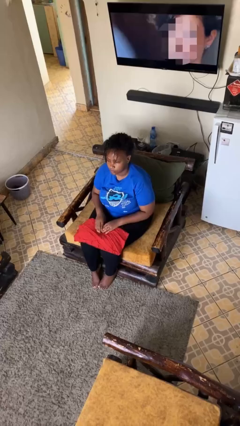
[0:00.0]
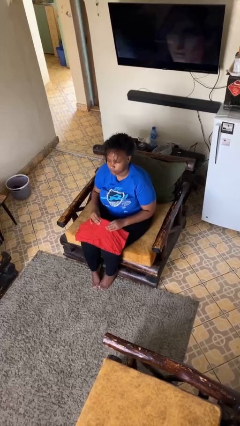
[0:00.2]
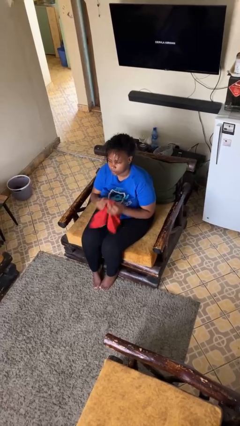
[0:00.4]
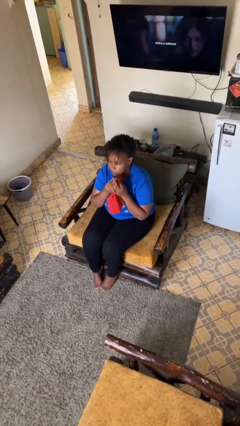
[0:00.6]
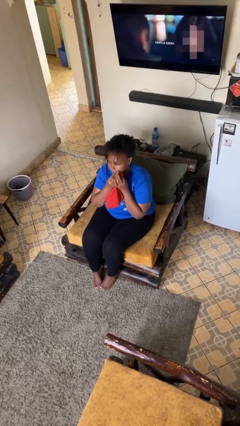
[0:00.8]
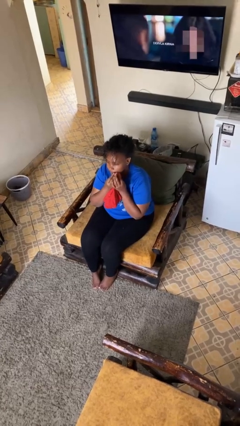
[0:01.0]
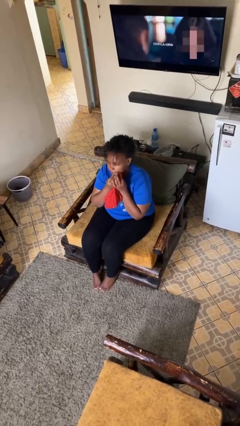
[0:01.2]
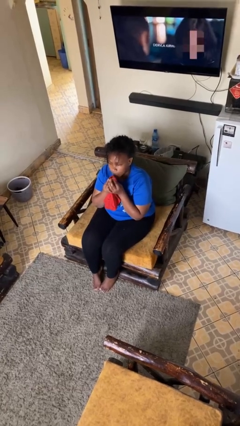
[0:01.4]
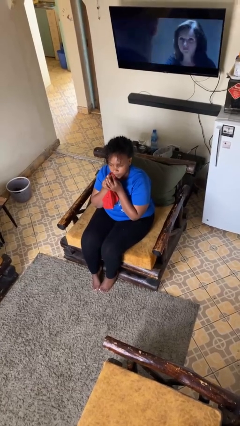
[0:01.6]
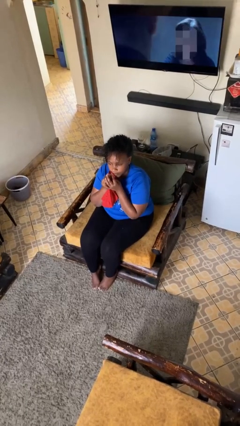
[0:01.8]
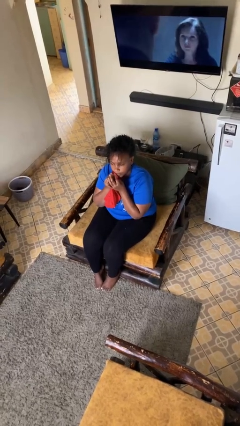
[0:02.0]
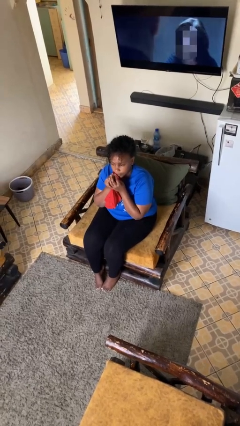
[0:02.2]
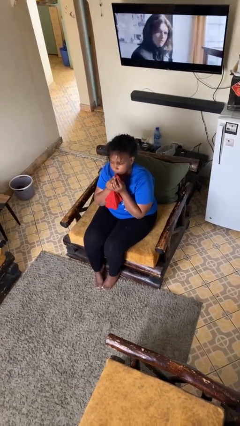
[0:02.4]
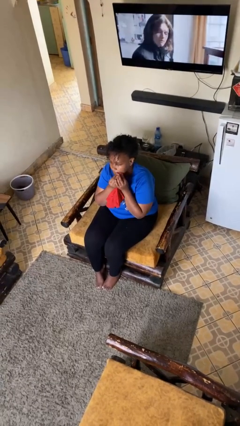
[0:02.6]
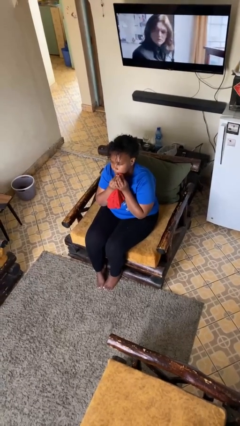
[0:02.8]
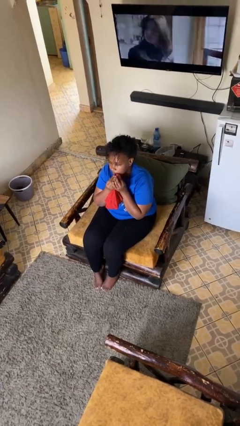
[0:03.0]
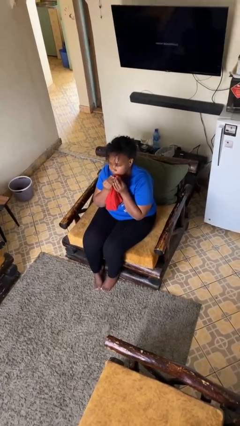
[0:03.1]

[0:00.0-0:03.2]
person wipes mouth with napkin

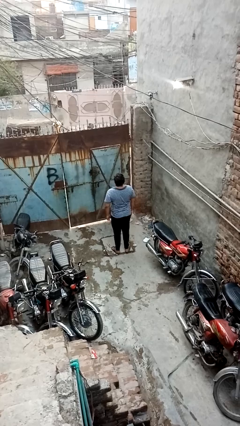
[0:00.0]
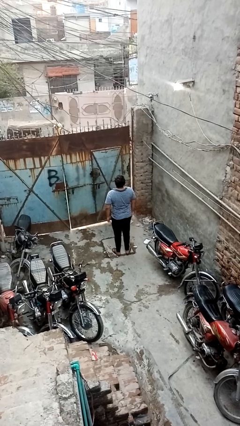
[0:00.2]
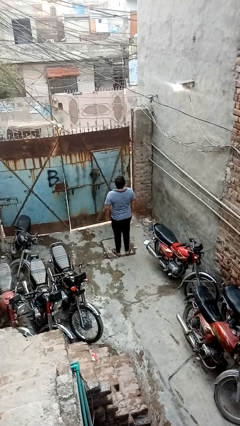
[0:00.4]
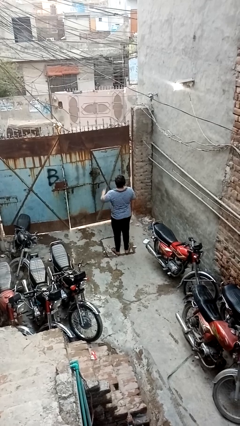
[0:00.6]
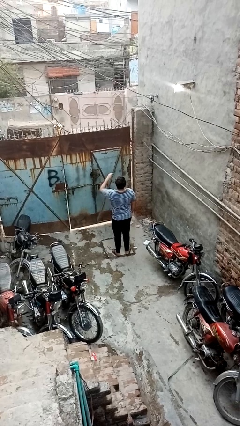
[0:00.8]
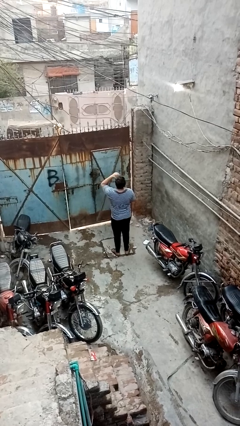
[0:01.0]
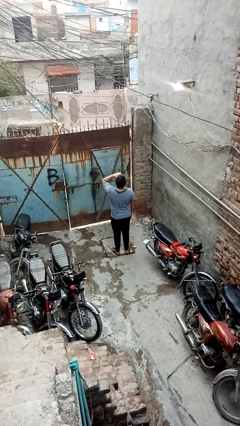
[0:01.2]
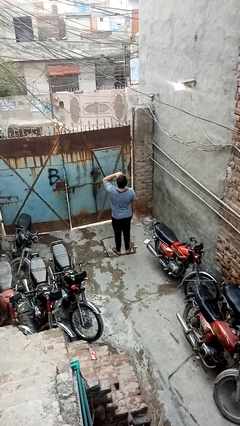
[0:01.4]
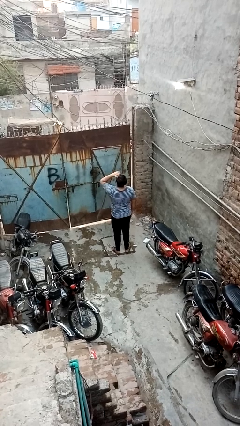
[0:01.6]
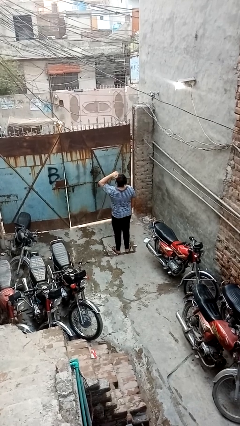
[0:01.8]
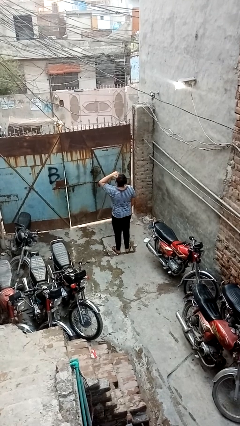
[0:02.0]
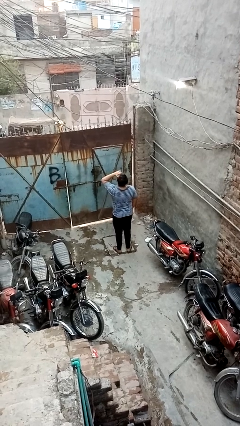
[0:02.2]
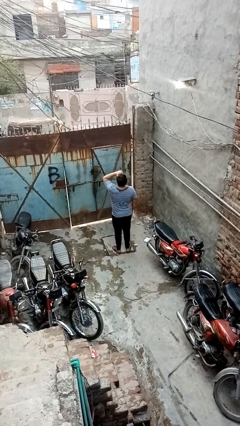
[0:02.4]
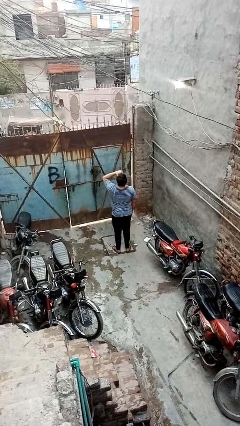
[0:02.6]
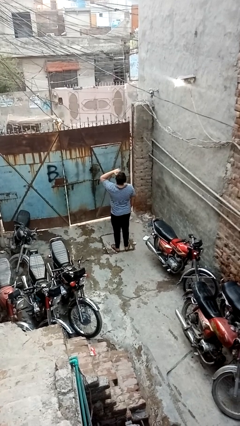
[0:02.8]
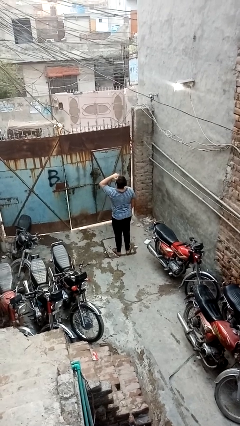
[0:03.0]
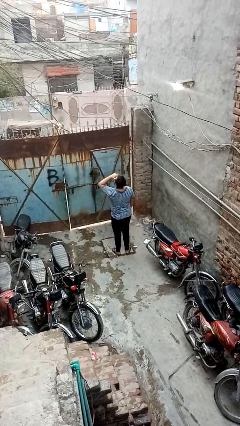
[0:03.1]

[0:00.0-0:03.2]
person shades eyes

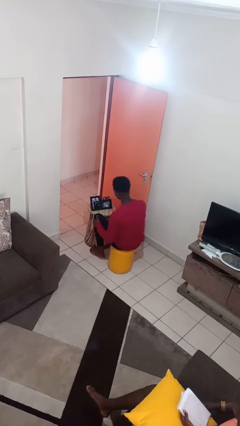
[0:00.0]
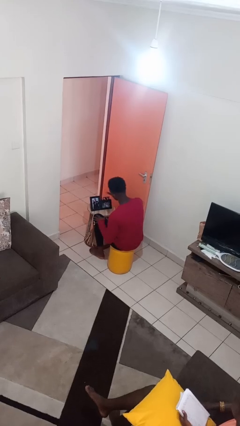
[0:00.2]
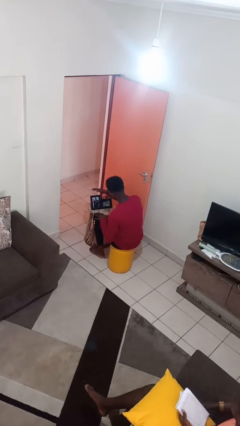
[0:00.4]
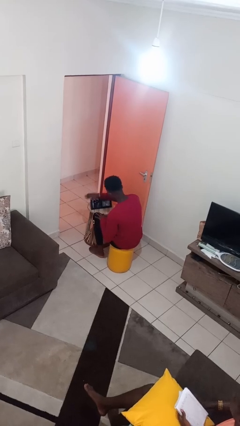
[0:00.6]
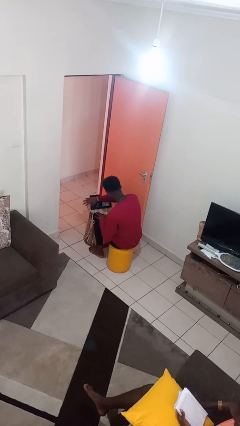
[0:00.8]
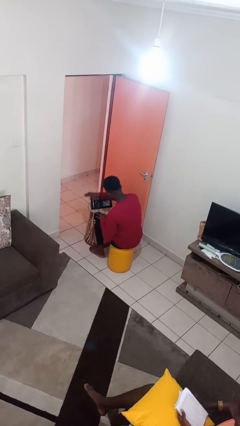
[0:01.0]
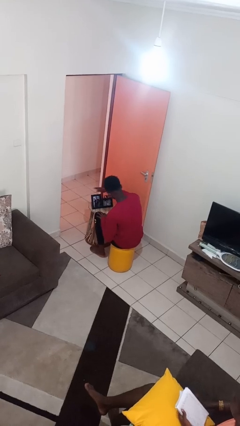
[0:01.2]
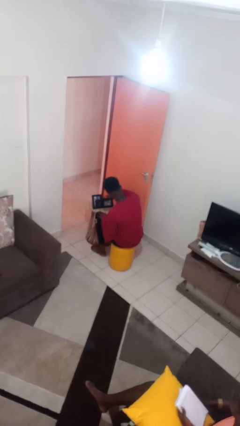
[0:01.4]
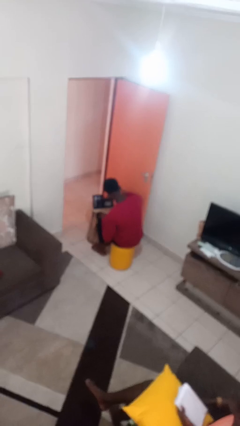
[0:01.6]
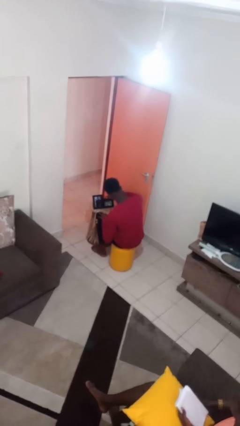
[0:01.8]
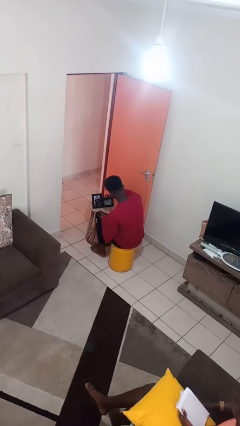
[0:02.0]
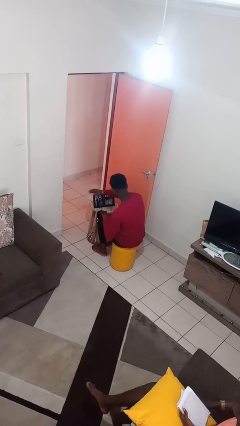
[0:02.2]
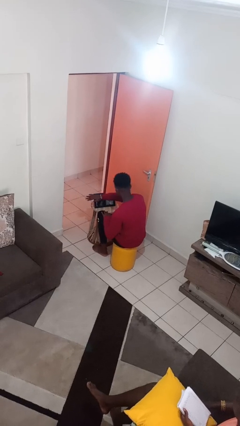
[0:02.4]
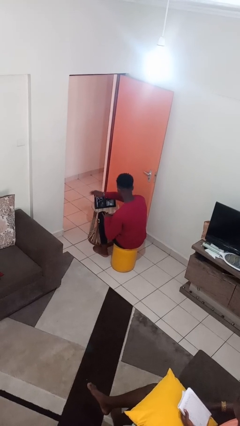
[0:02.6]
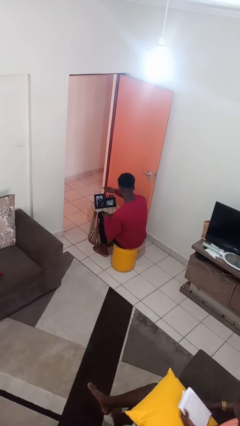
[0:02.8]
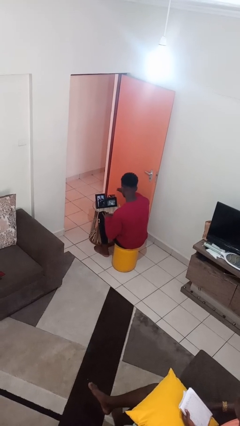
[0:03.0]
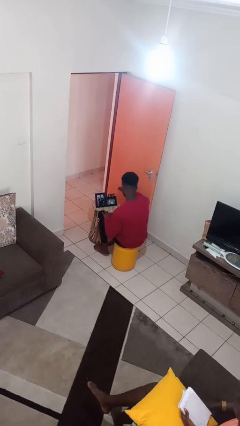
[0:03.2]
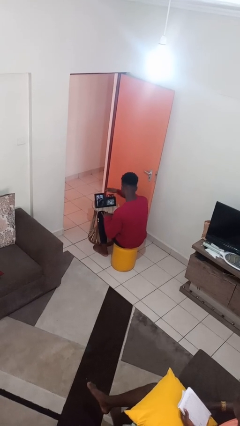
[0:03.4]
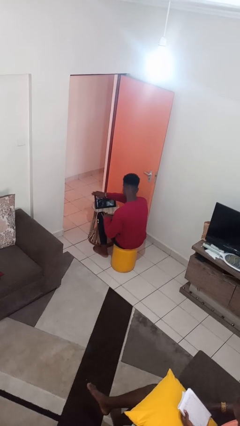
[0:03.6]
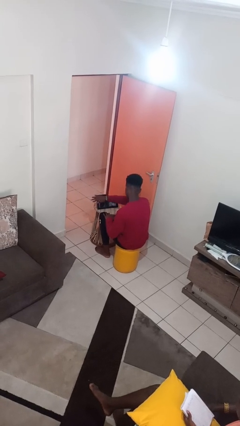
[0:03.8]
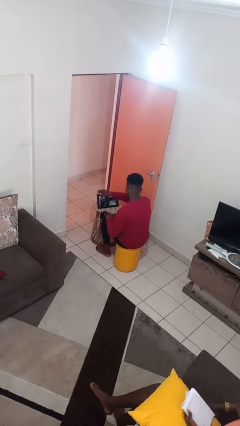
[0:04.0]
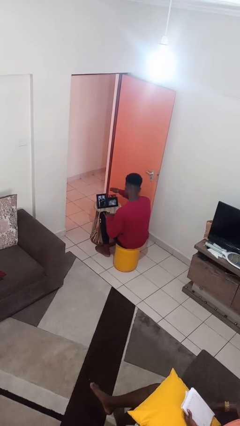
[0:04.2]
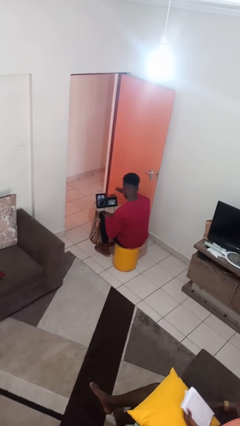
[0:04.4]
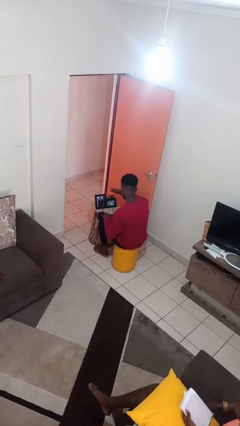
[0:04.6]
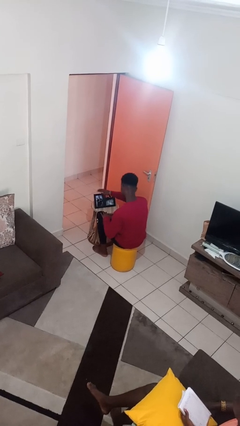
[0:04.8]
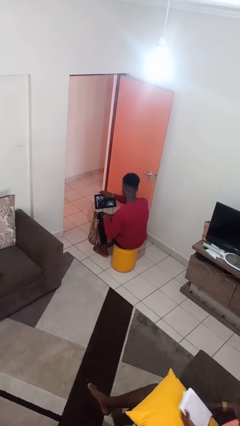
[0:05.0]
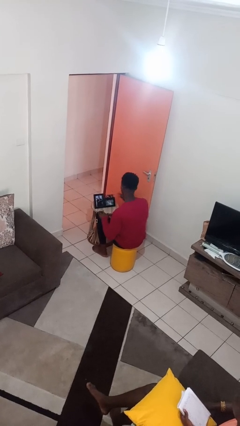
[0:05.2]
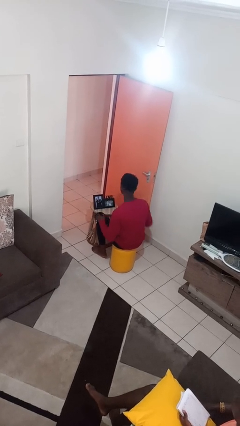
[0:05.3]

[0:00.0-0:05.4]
person waves hand over object

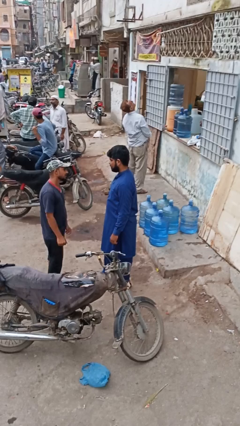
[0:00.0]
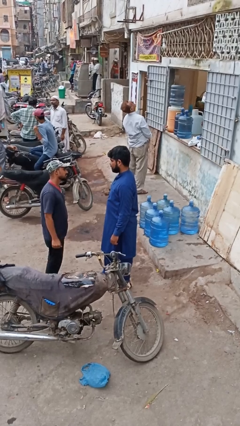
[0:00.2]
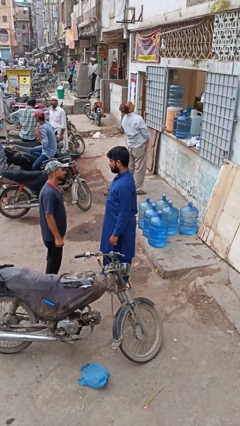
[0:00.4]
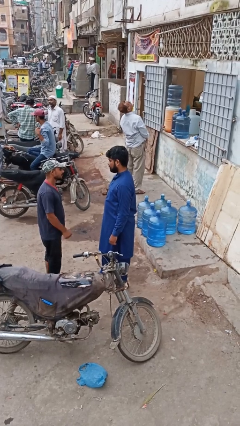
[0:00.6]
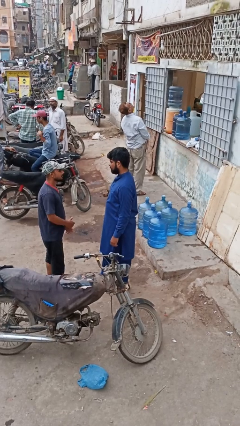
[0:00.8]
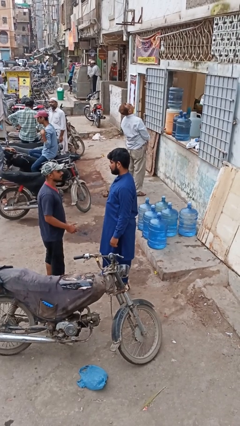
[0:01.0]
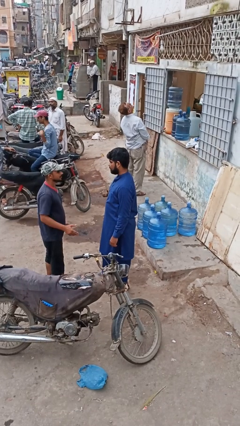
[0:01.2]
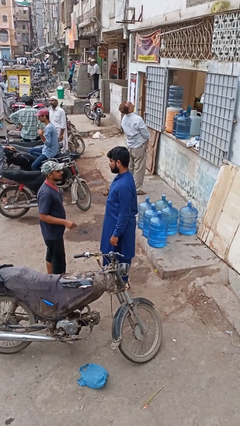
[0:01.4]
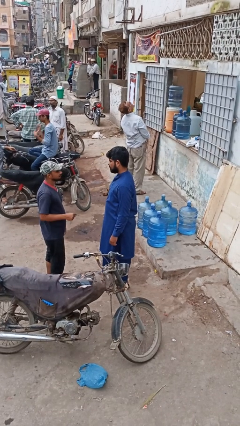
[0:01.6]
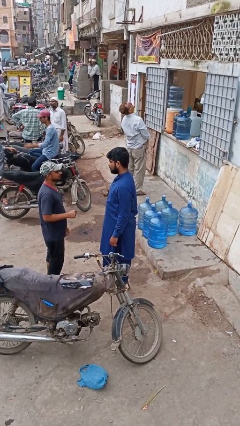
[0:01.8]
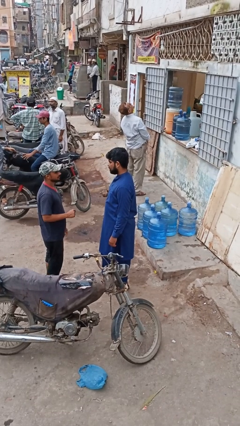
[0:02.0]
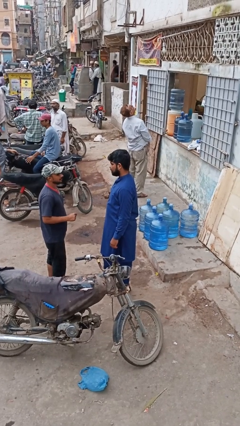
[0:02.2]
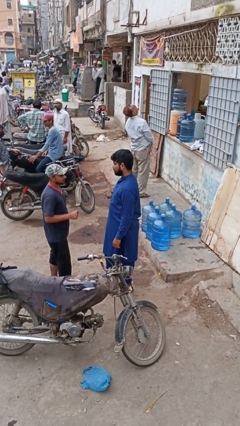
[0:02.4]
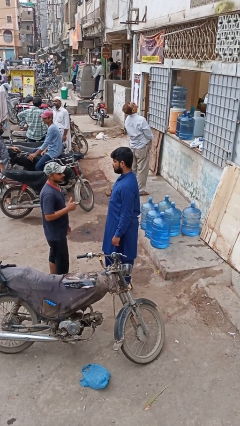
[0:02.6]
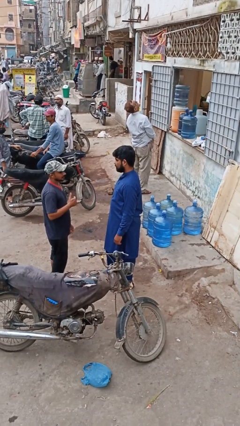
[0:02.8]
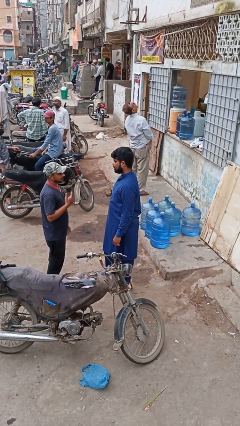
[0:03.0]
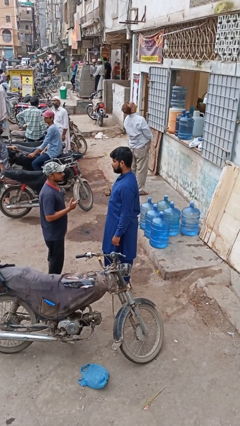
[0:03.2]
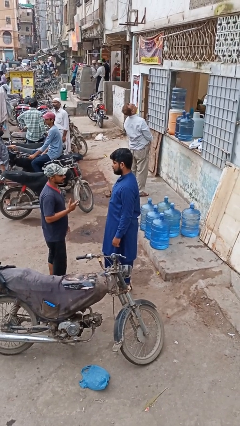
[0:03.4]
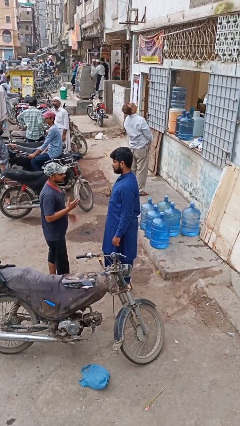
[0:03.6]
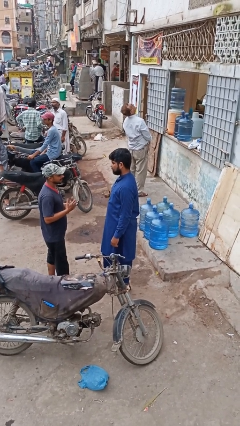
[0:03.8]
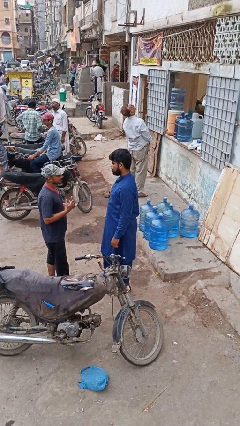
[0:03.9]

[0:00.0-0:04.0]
person talks to person

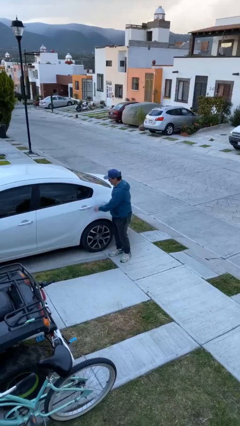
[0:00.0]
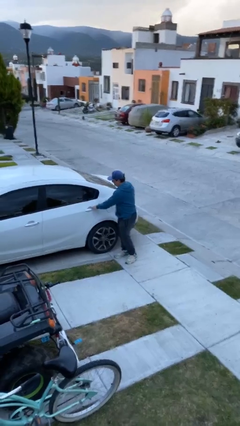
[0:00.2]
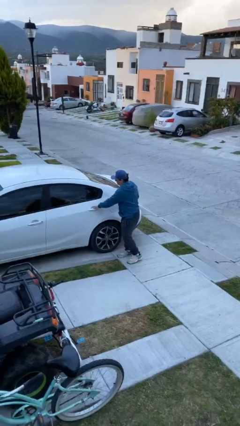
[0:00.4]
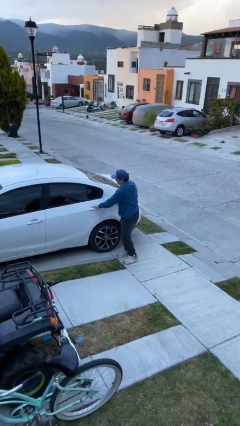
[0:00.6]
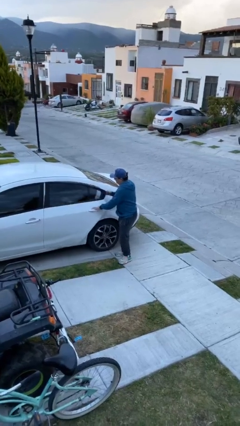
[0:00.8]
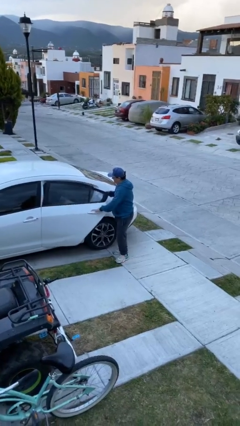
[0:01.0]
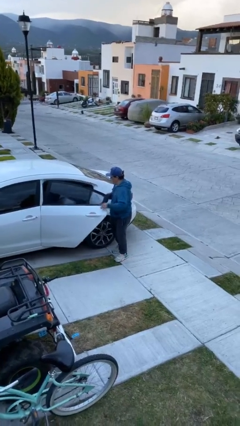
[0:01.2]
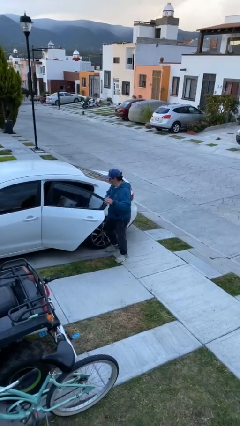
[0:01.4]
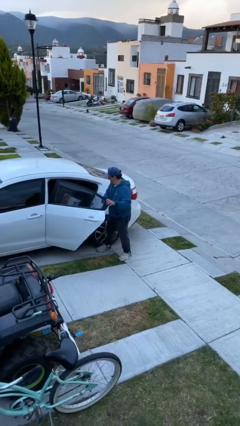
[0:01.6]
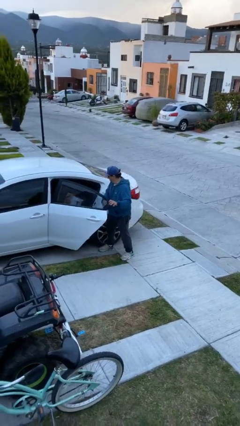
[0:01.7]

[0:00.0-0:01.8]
person opens car door
